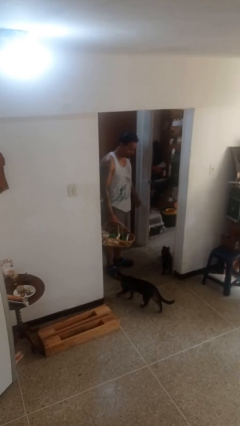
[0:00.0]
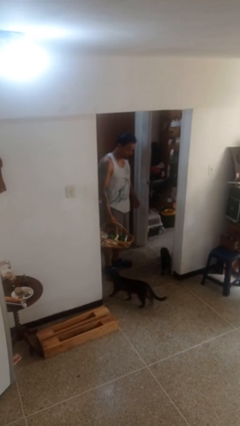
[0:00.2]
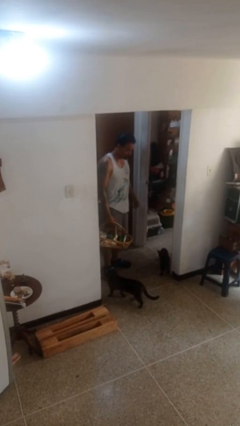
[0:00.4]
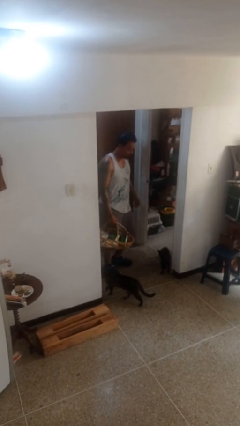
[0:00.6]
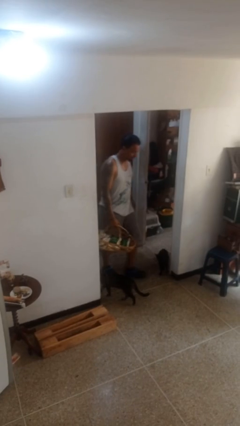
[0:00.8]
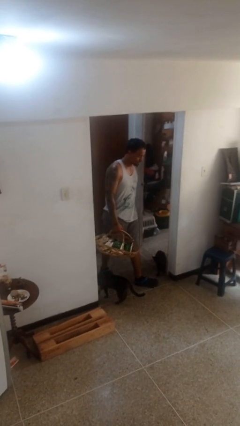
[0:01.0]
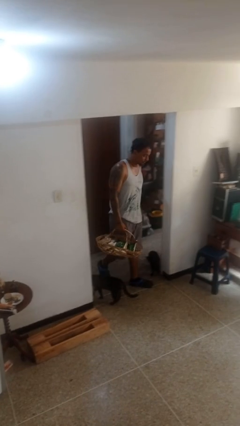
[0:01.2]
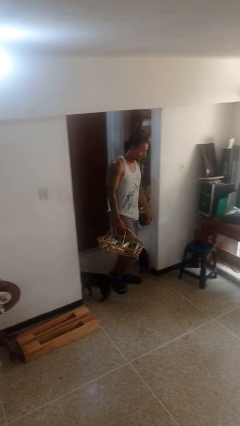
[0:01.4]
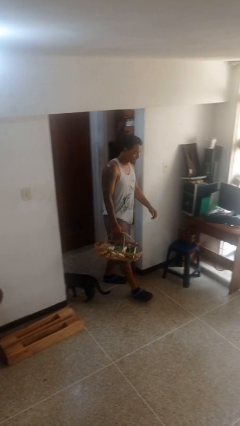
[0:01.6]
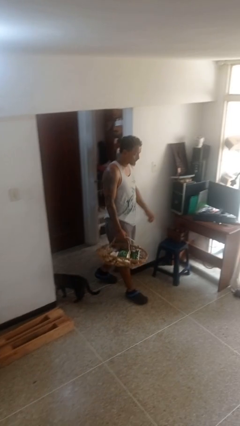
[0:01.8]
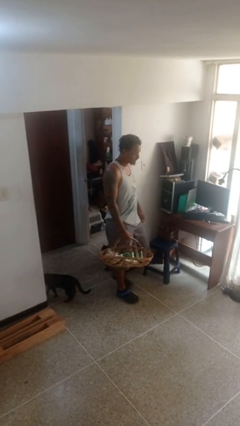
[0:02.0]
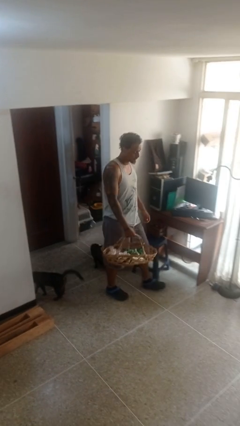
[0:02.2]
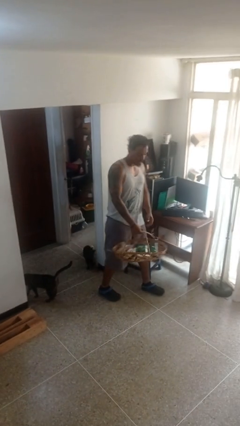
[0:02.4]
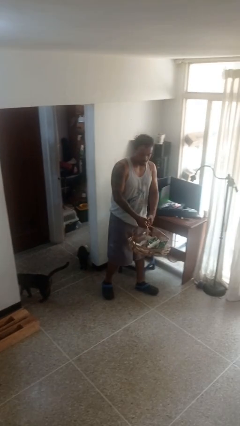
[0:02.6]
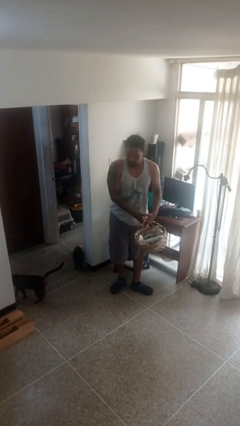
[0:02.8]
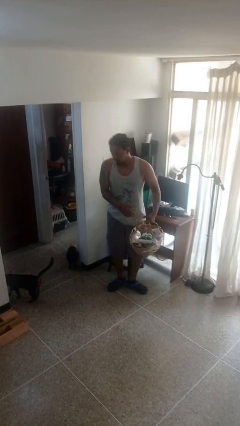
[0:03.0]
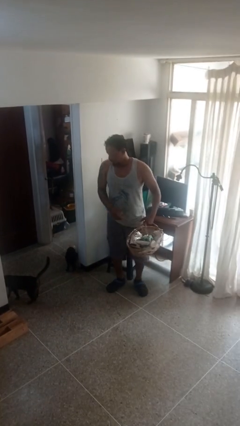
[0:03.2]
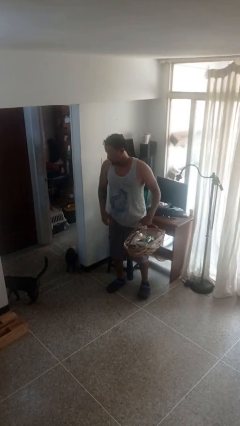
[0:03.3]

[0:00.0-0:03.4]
person carries groceries

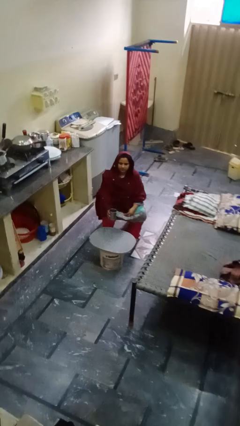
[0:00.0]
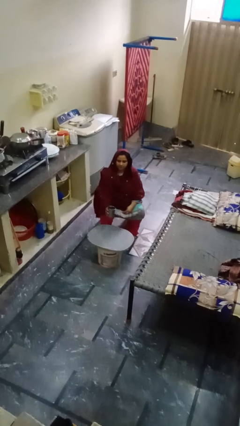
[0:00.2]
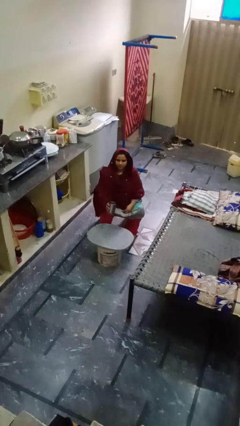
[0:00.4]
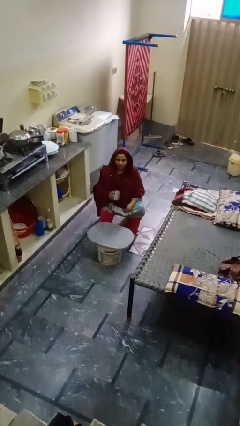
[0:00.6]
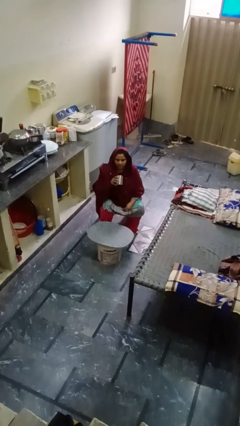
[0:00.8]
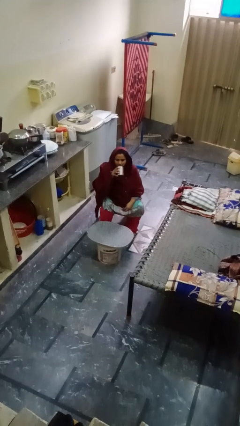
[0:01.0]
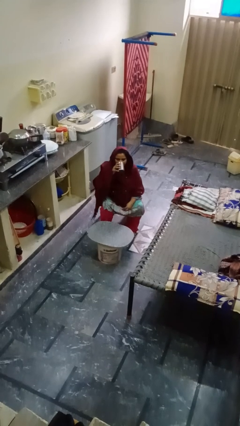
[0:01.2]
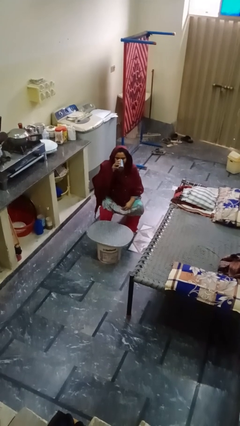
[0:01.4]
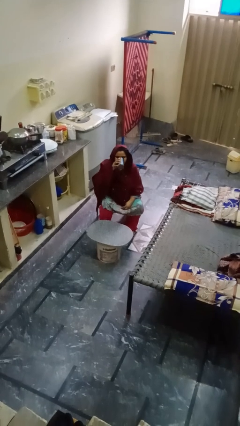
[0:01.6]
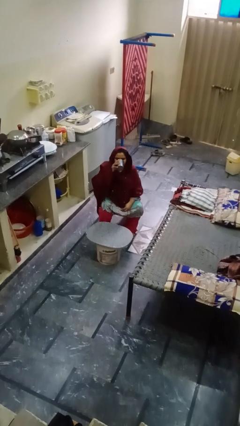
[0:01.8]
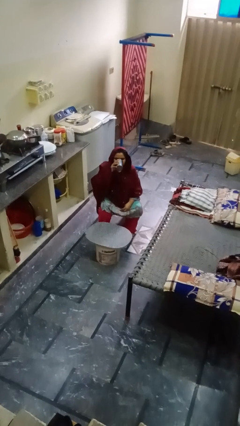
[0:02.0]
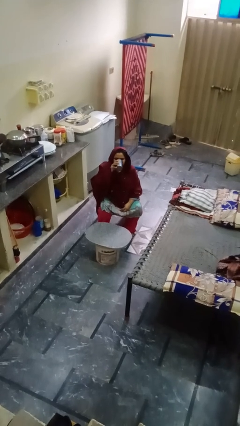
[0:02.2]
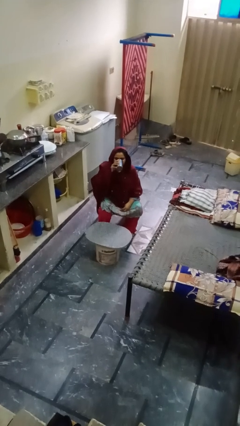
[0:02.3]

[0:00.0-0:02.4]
person drinks from shotglass

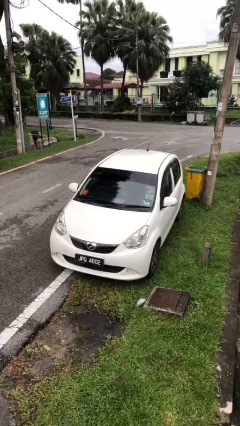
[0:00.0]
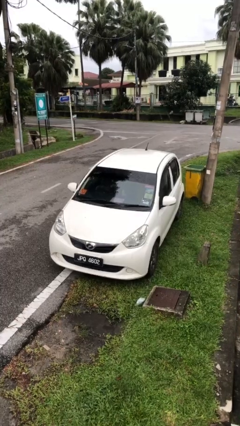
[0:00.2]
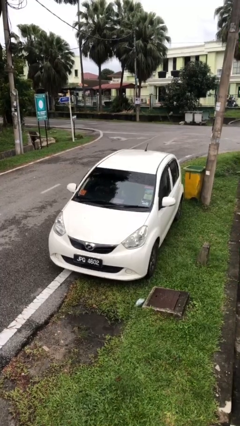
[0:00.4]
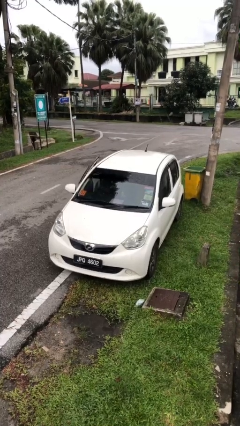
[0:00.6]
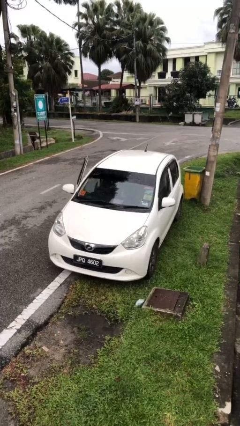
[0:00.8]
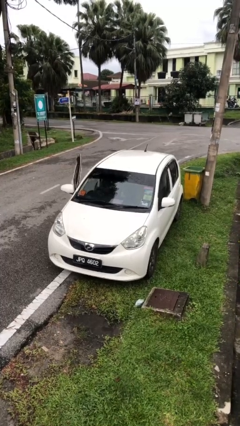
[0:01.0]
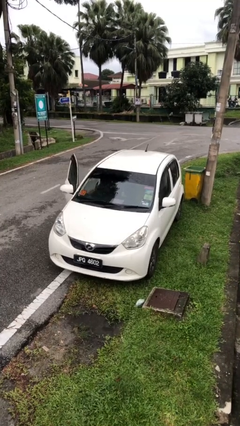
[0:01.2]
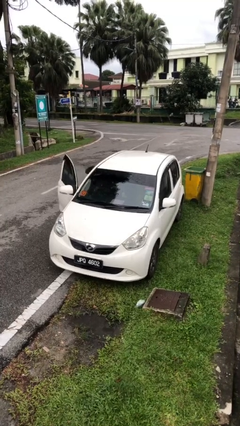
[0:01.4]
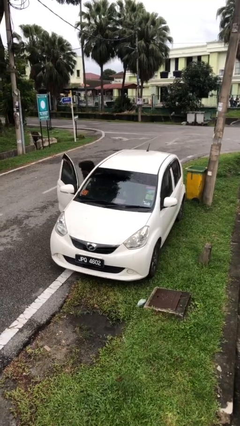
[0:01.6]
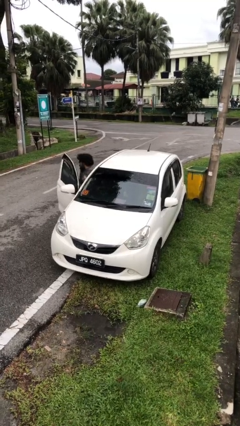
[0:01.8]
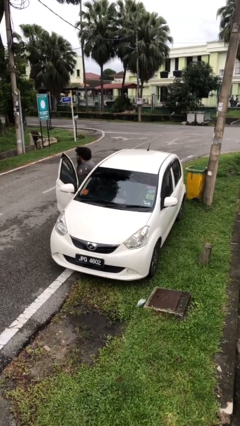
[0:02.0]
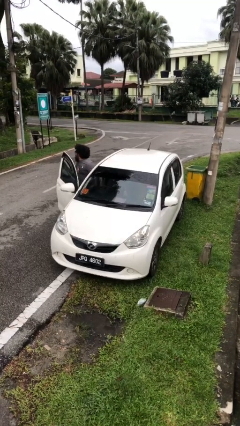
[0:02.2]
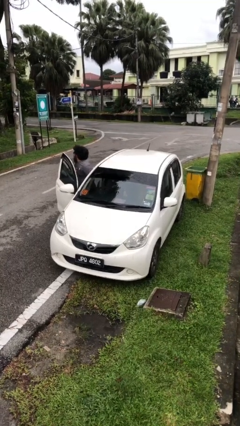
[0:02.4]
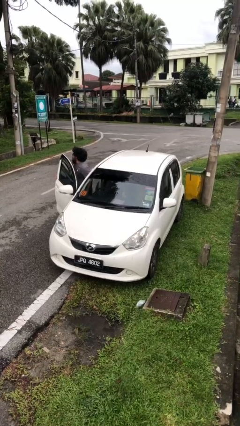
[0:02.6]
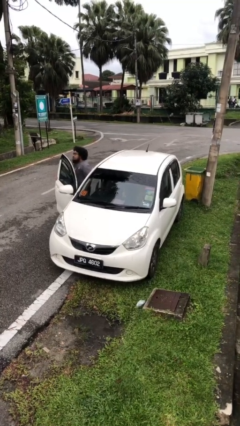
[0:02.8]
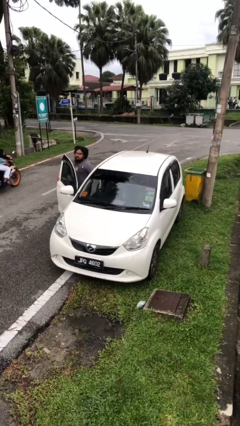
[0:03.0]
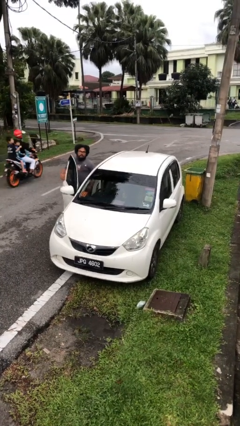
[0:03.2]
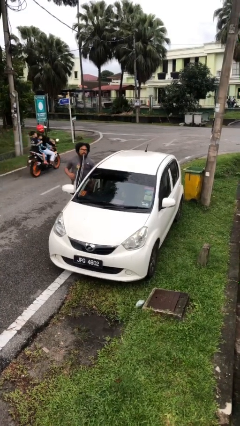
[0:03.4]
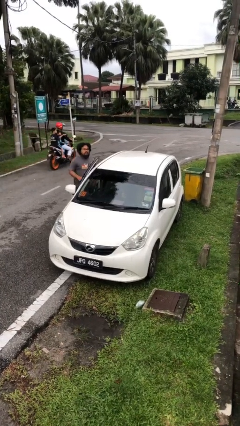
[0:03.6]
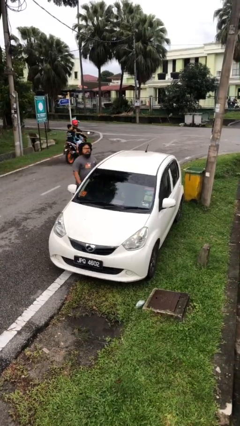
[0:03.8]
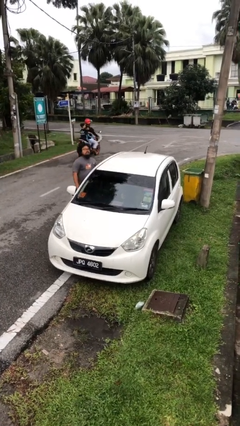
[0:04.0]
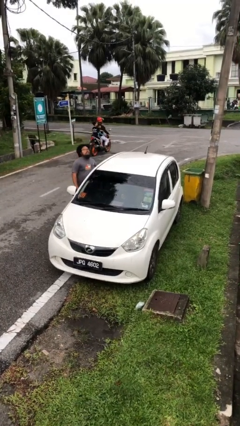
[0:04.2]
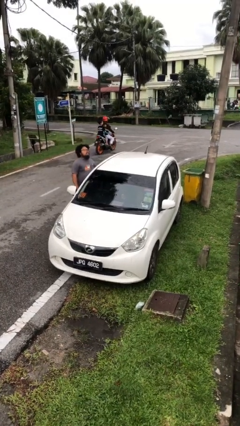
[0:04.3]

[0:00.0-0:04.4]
car drops off person

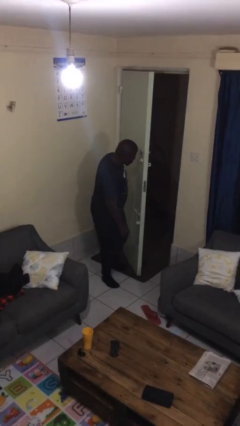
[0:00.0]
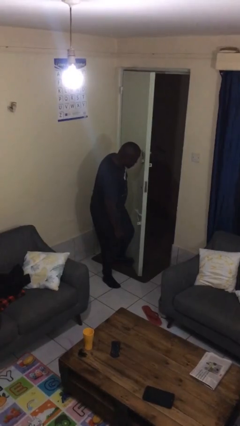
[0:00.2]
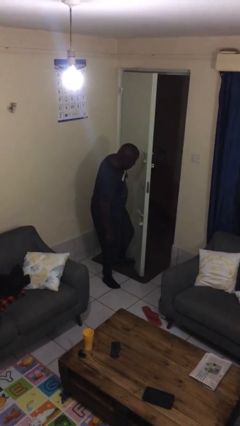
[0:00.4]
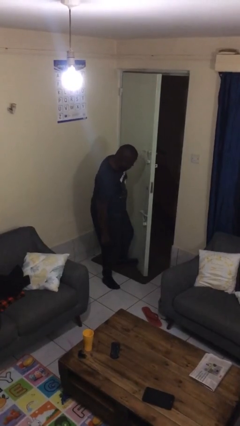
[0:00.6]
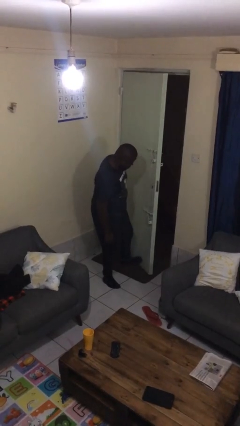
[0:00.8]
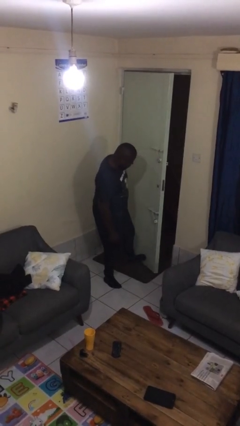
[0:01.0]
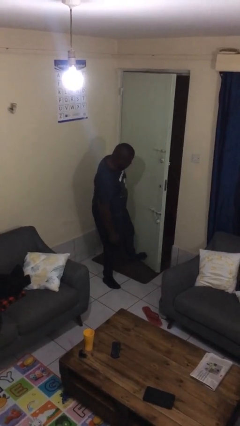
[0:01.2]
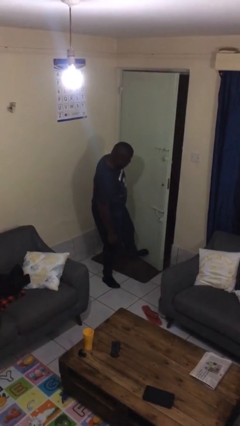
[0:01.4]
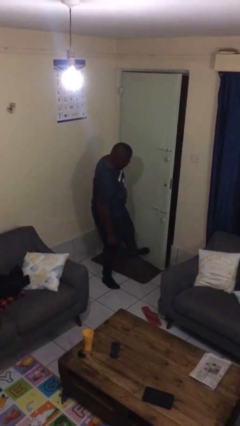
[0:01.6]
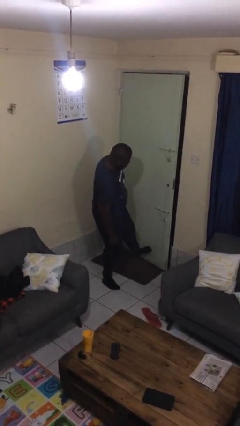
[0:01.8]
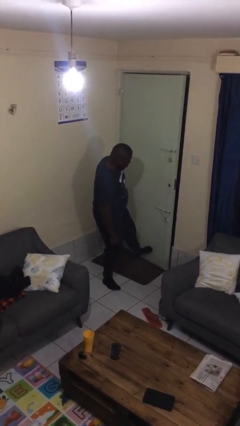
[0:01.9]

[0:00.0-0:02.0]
person closes door with foot

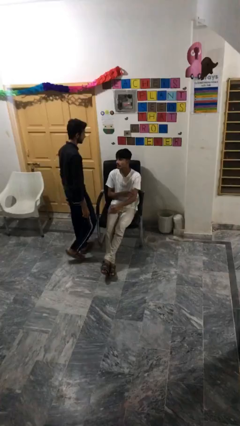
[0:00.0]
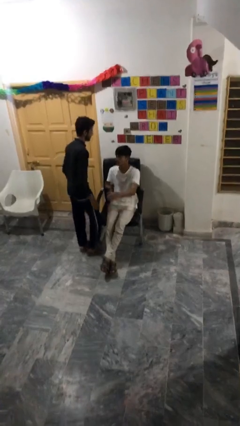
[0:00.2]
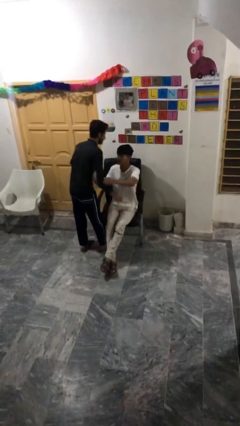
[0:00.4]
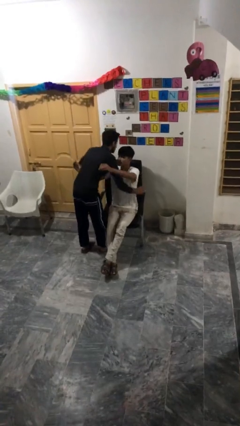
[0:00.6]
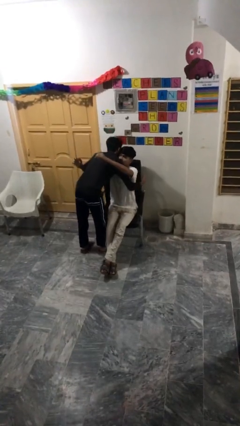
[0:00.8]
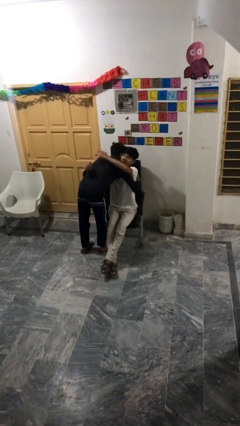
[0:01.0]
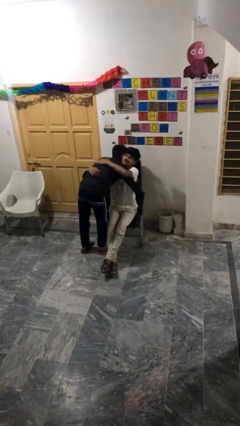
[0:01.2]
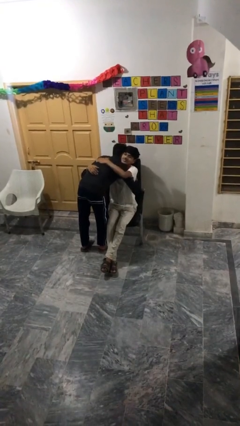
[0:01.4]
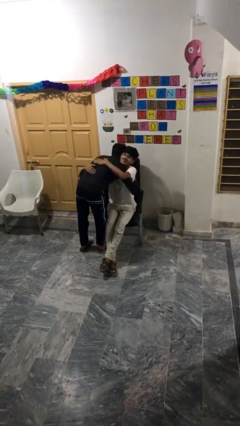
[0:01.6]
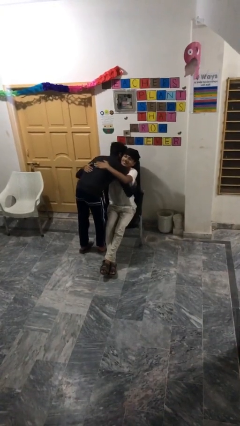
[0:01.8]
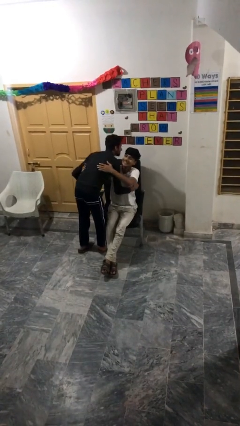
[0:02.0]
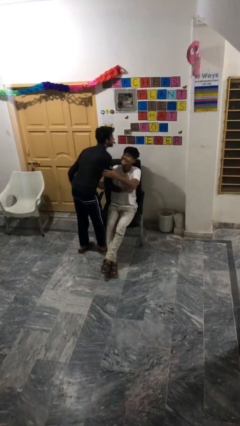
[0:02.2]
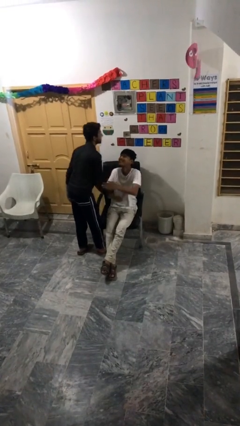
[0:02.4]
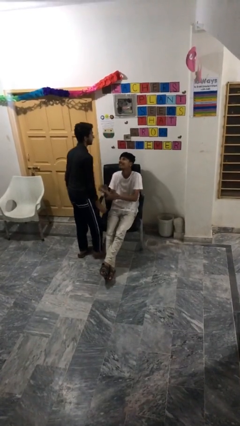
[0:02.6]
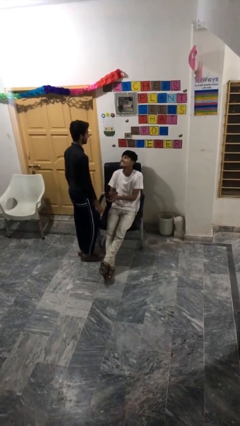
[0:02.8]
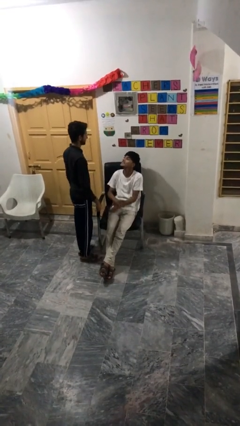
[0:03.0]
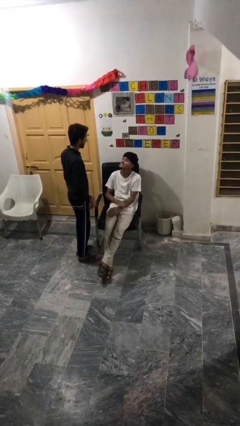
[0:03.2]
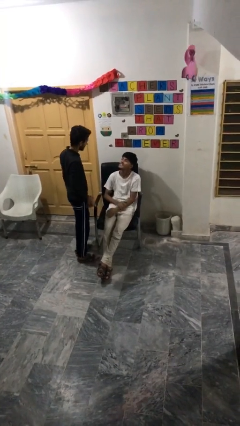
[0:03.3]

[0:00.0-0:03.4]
person embraces person

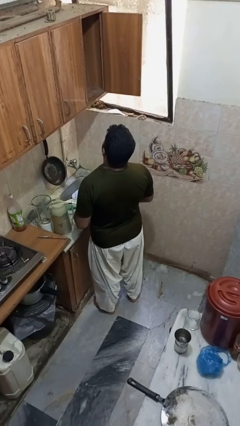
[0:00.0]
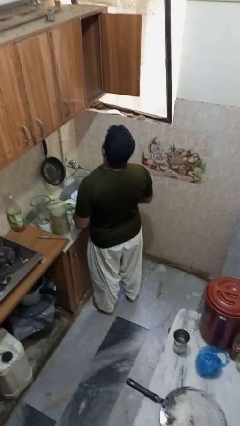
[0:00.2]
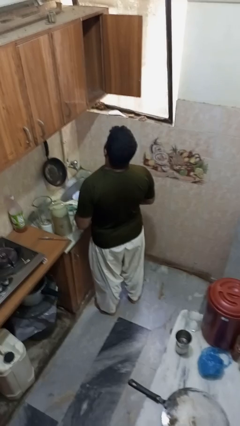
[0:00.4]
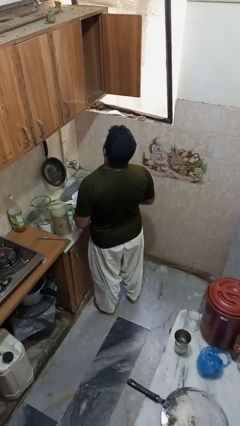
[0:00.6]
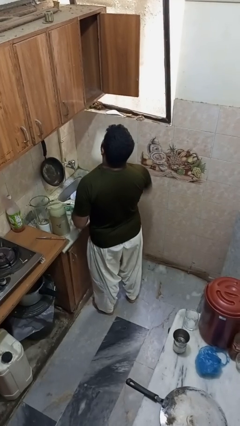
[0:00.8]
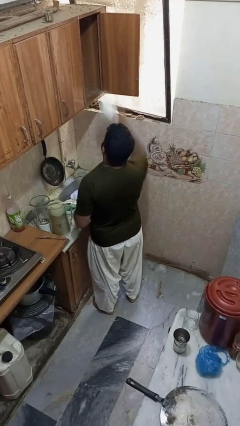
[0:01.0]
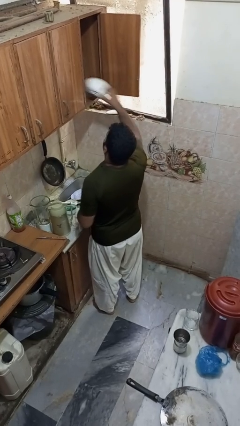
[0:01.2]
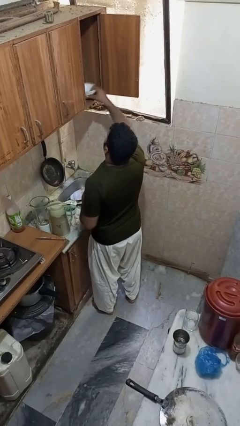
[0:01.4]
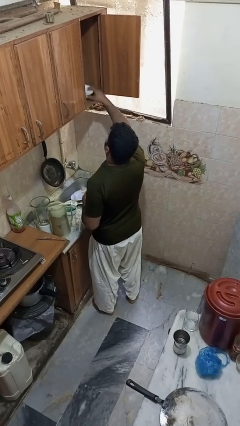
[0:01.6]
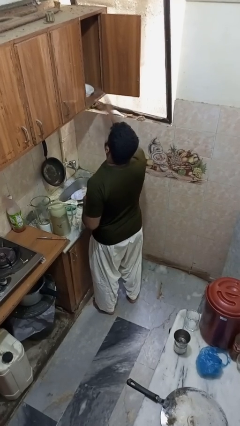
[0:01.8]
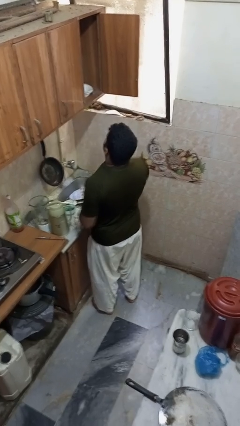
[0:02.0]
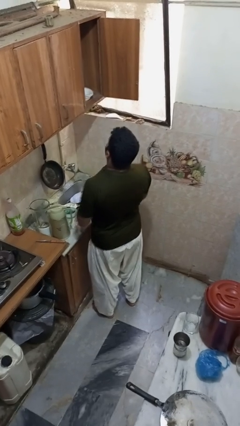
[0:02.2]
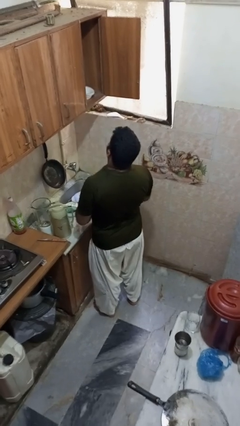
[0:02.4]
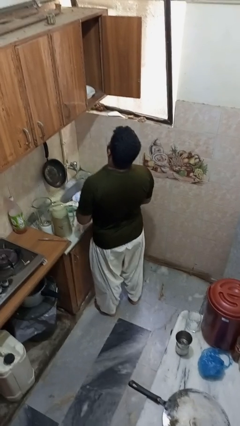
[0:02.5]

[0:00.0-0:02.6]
person puts object in cabinet
